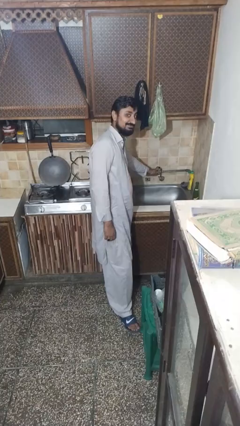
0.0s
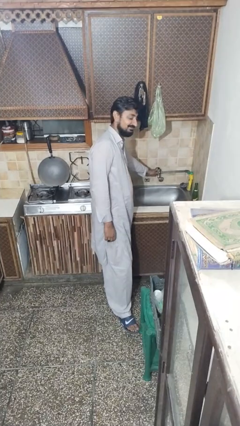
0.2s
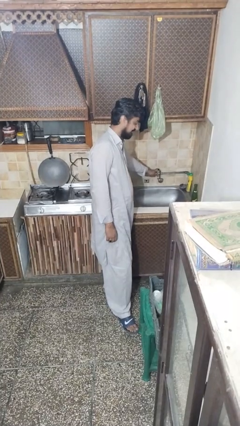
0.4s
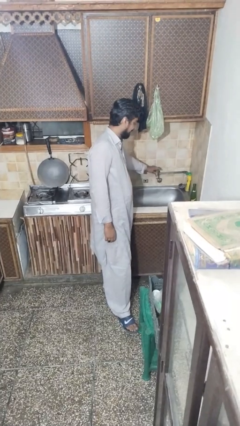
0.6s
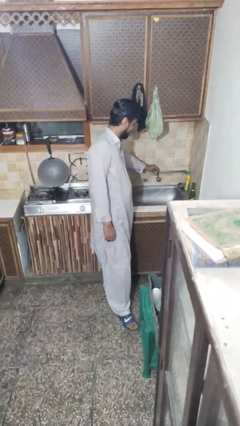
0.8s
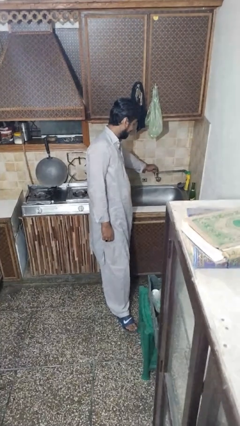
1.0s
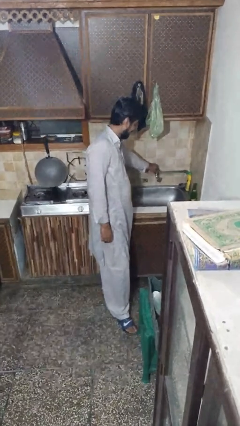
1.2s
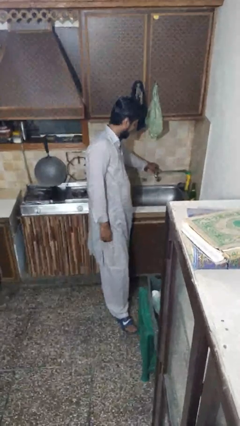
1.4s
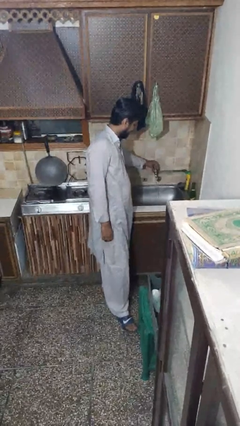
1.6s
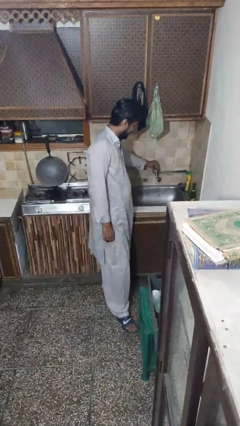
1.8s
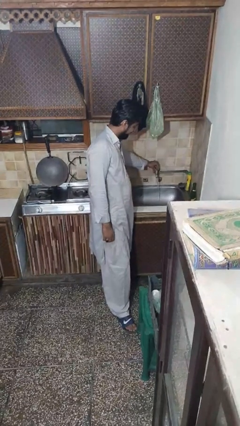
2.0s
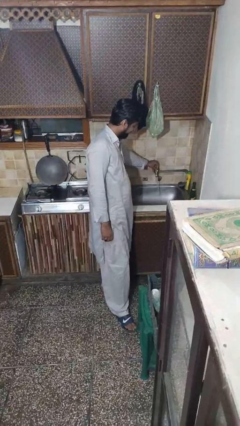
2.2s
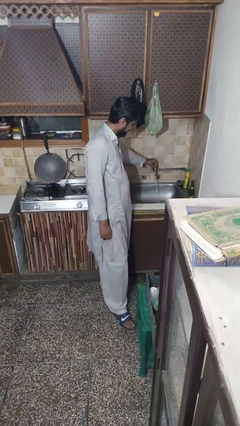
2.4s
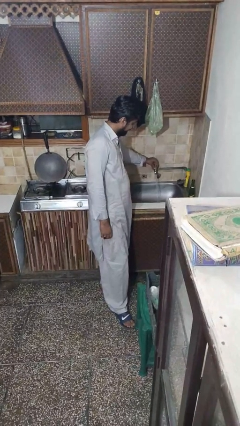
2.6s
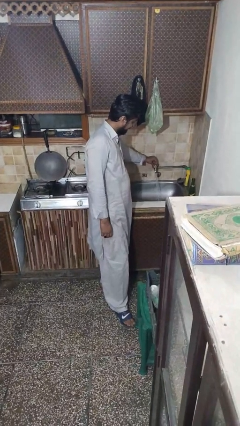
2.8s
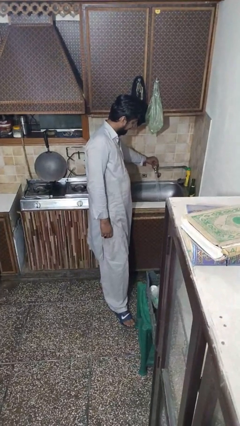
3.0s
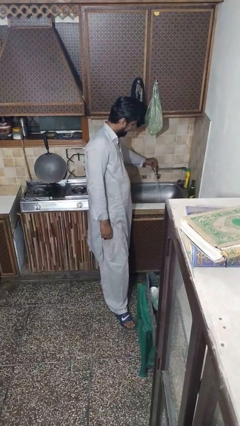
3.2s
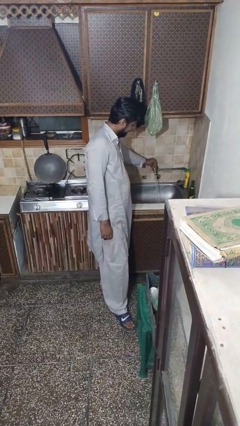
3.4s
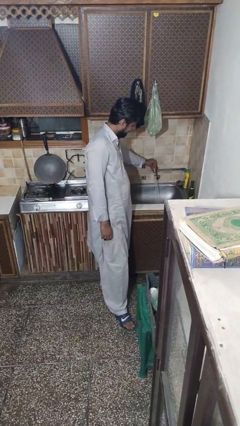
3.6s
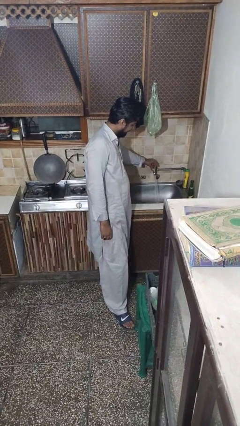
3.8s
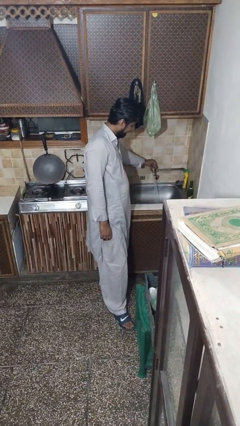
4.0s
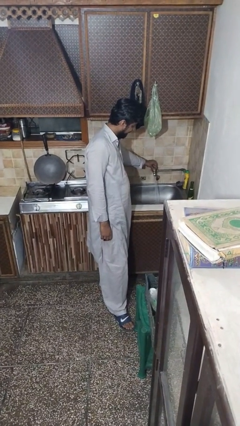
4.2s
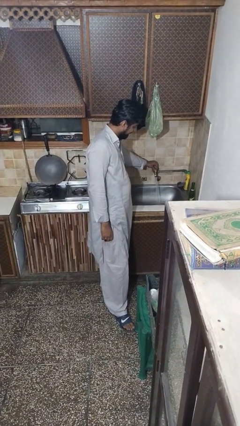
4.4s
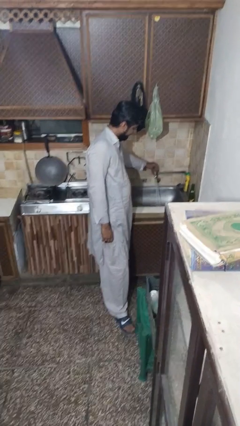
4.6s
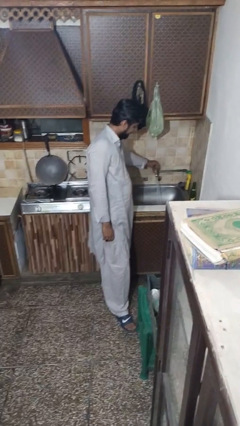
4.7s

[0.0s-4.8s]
person turns on faucet

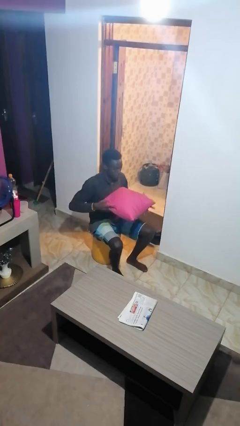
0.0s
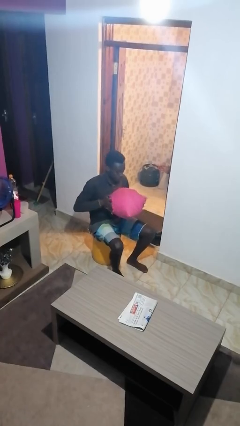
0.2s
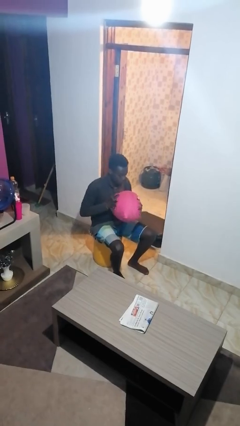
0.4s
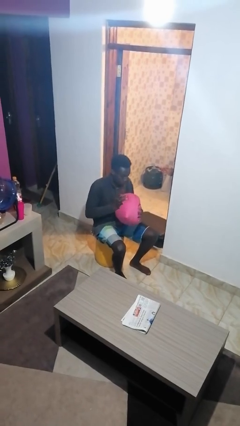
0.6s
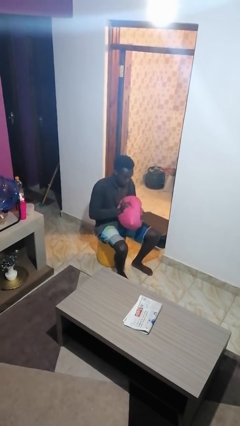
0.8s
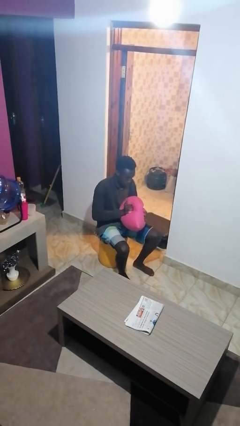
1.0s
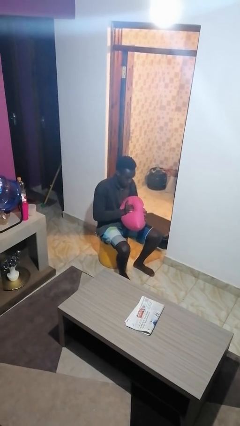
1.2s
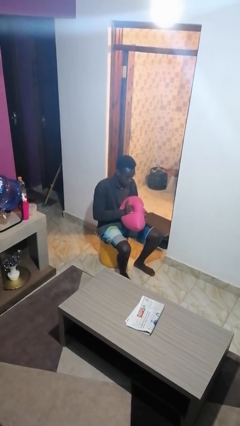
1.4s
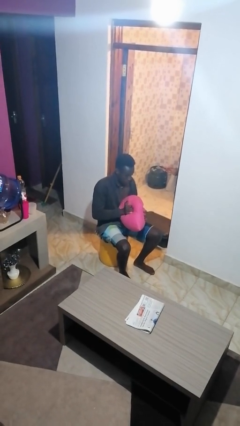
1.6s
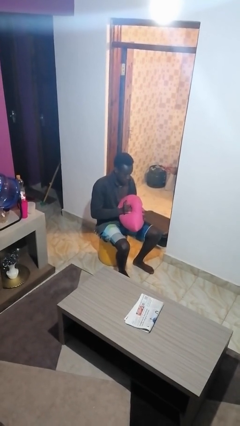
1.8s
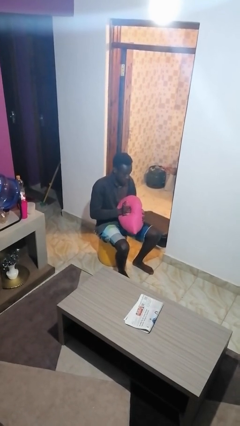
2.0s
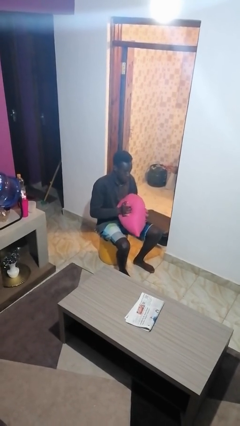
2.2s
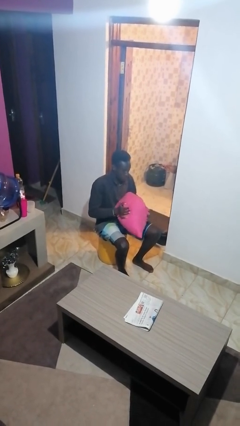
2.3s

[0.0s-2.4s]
person squeezes object

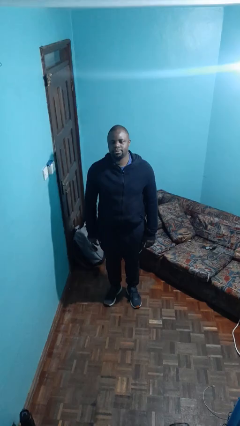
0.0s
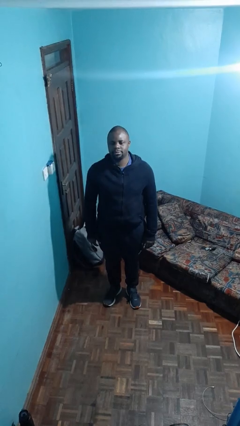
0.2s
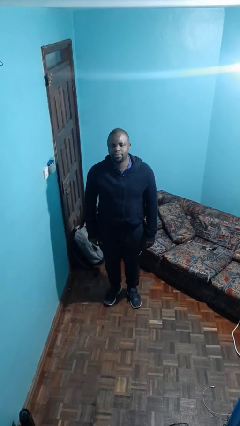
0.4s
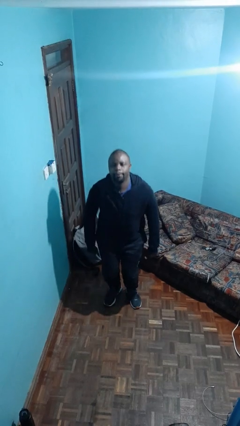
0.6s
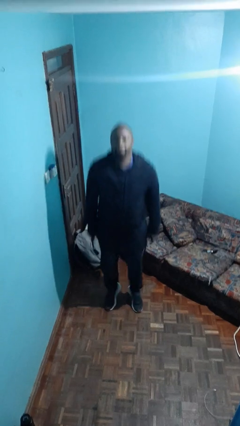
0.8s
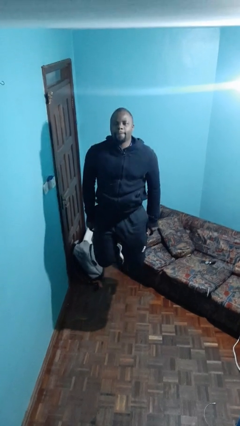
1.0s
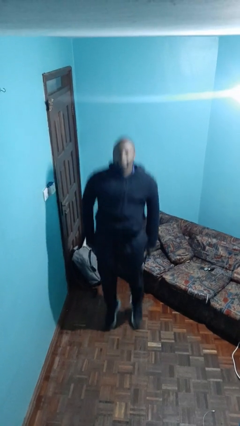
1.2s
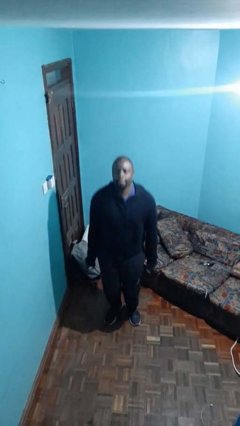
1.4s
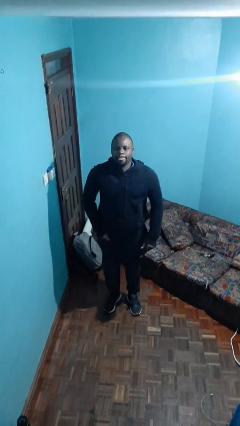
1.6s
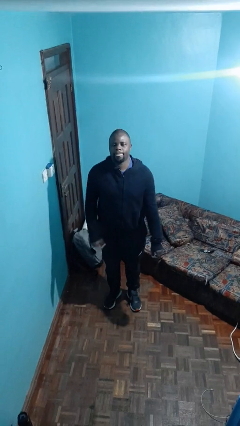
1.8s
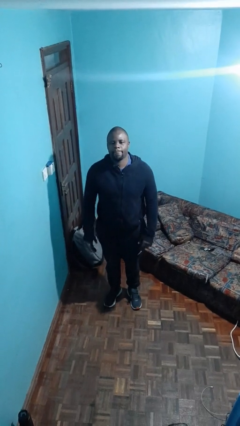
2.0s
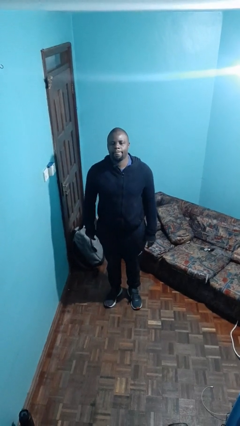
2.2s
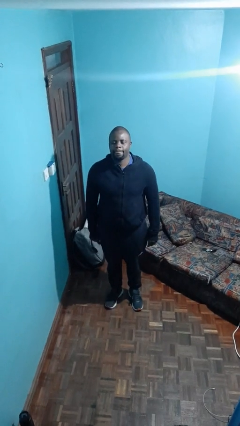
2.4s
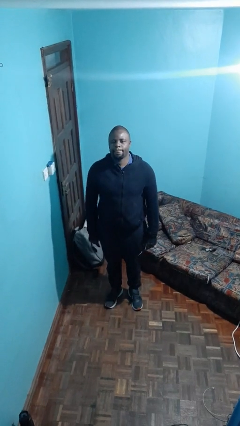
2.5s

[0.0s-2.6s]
person jumps

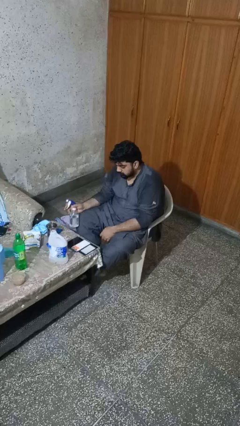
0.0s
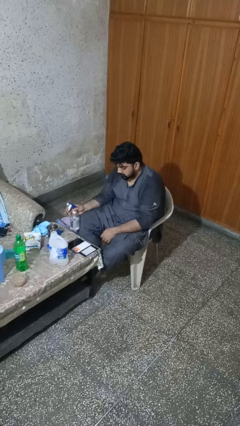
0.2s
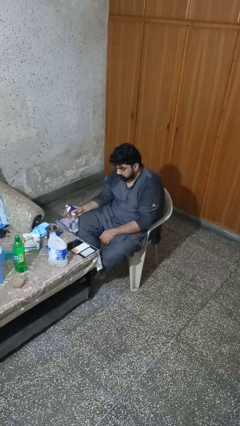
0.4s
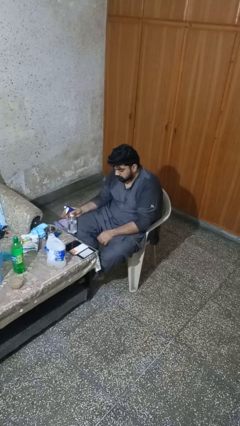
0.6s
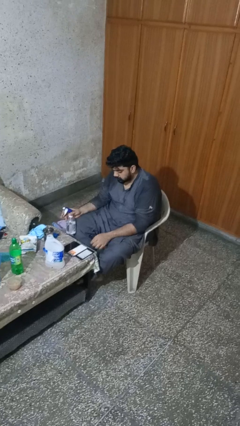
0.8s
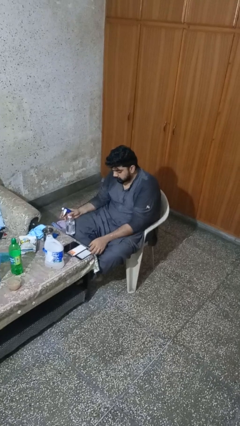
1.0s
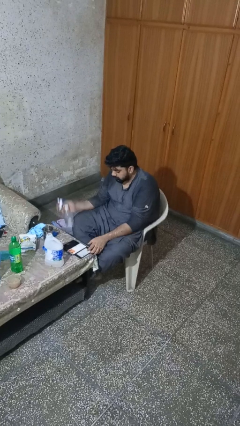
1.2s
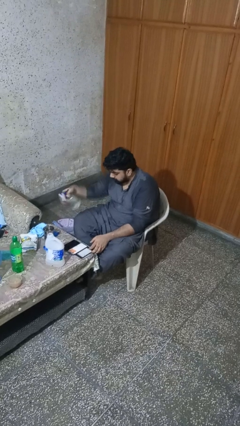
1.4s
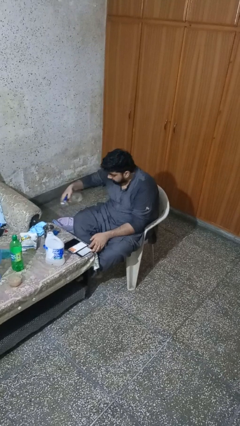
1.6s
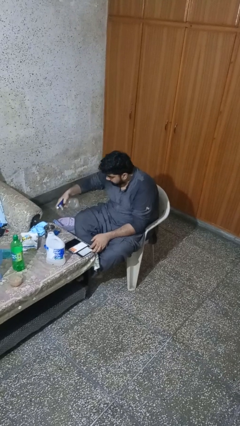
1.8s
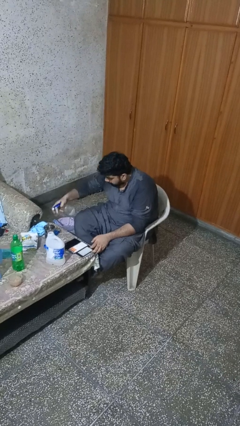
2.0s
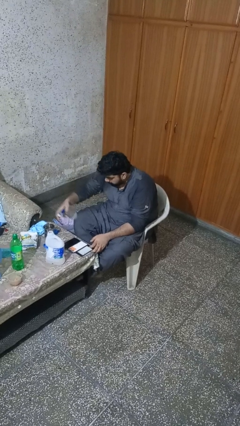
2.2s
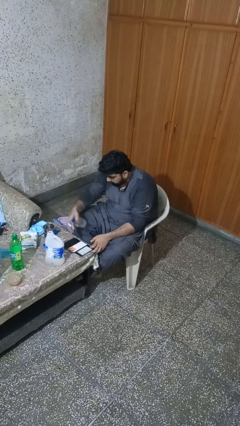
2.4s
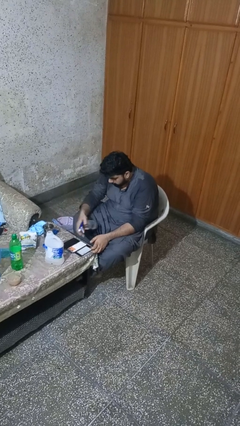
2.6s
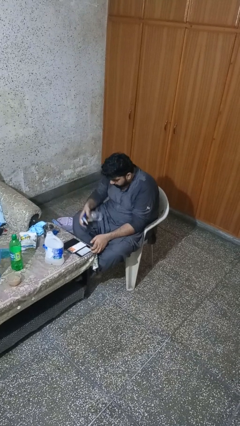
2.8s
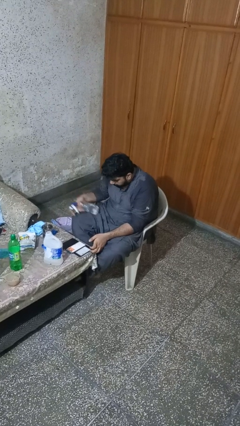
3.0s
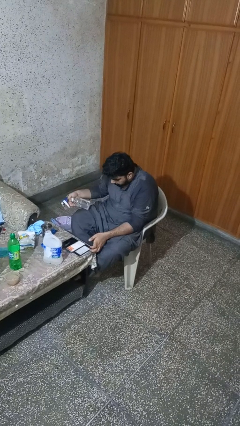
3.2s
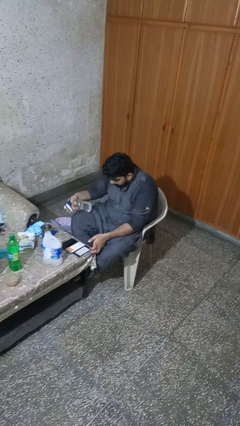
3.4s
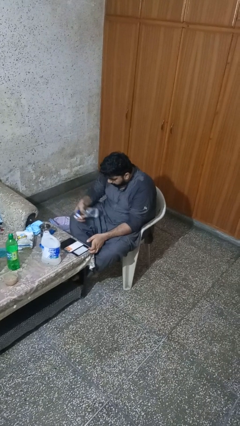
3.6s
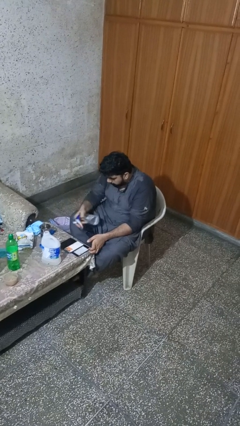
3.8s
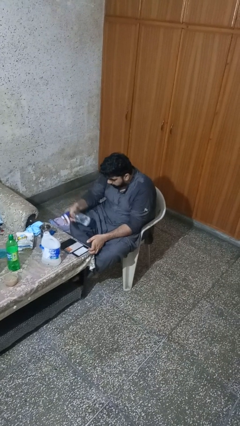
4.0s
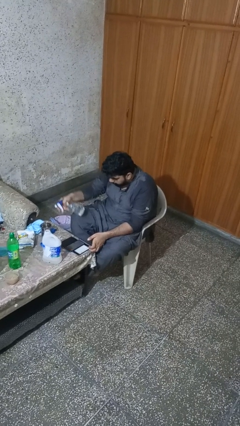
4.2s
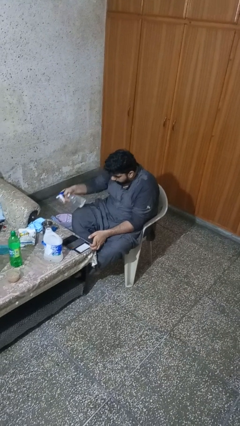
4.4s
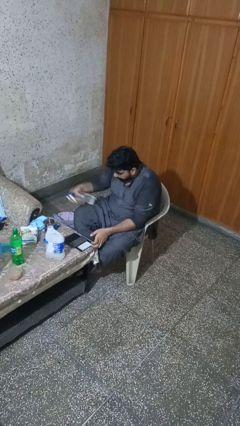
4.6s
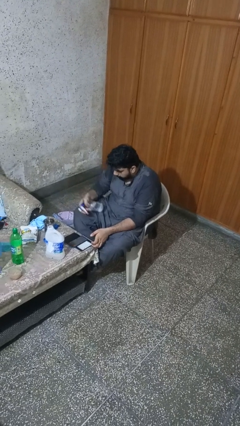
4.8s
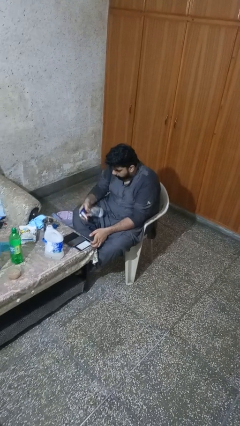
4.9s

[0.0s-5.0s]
person sprays from bottle

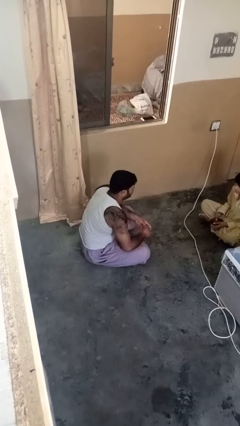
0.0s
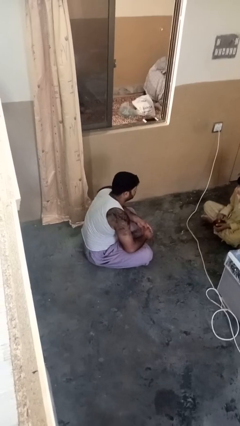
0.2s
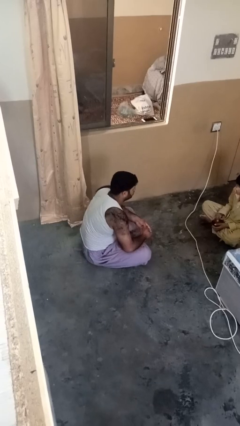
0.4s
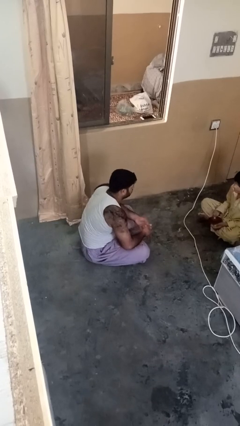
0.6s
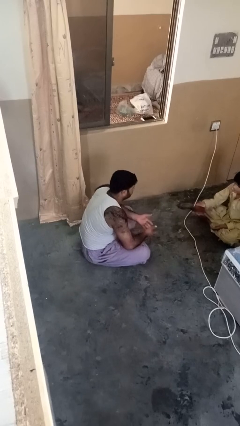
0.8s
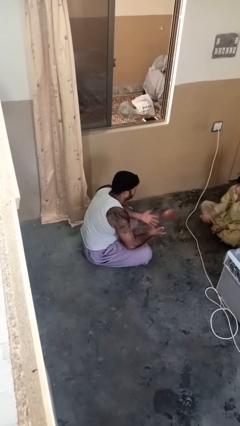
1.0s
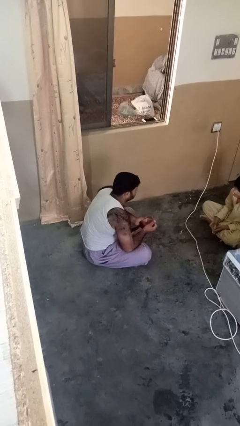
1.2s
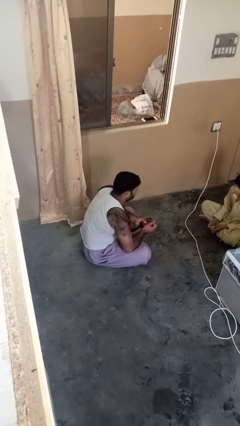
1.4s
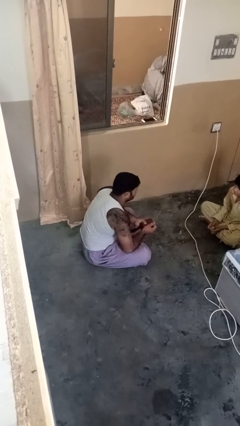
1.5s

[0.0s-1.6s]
person catches object from person

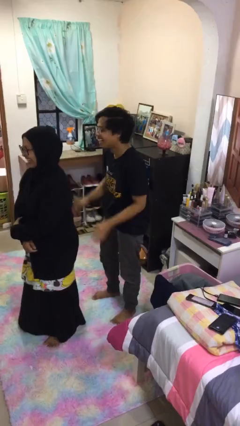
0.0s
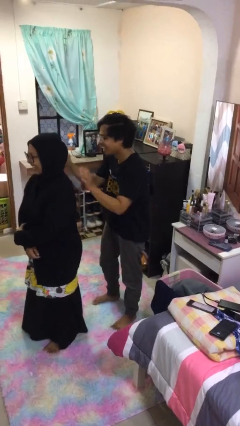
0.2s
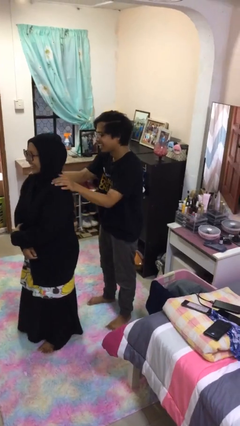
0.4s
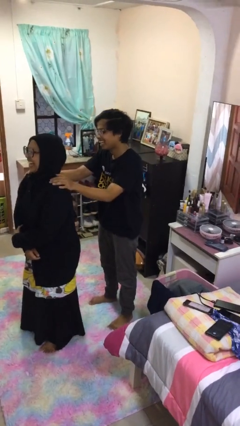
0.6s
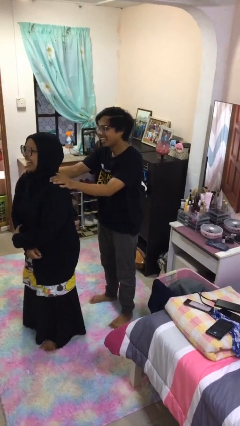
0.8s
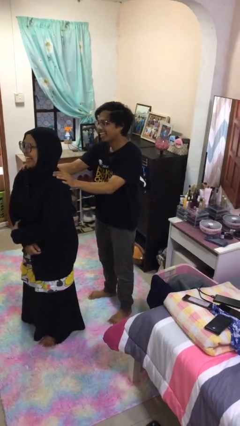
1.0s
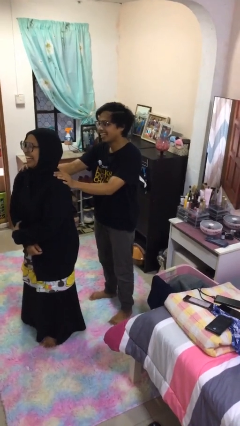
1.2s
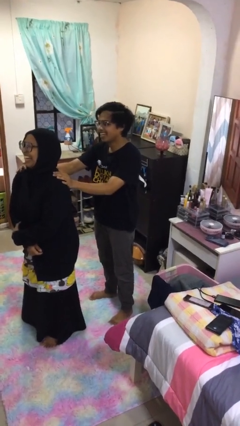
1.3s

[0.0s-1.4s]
person grabs person by shoulder
